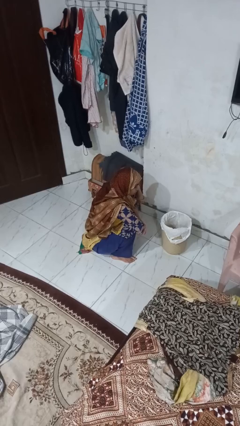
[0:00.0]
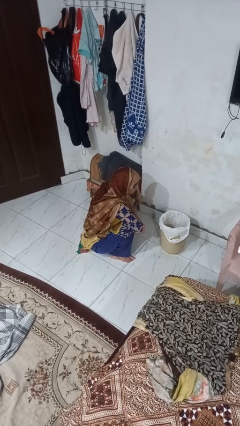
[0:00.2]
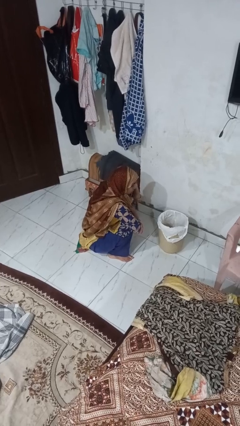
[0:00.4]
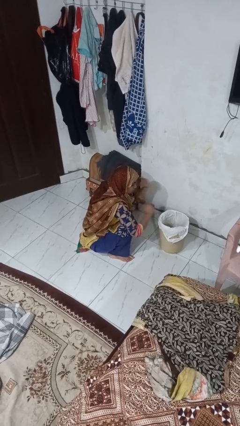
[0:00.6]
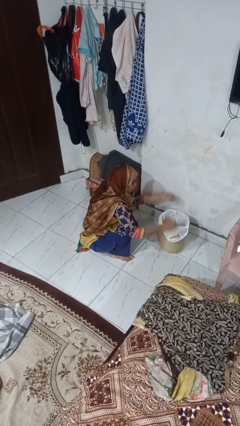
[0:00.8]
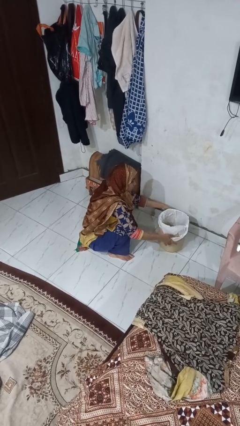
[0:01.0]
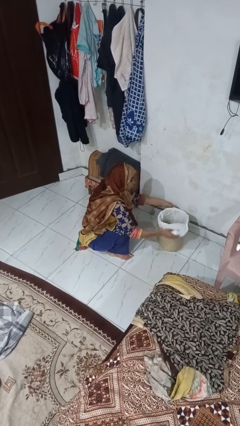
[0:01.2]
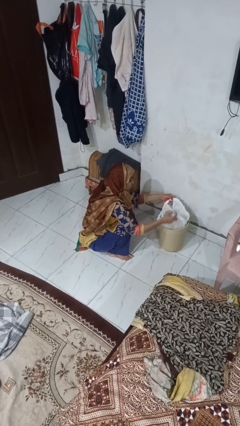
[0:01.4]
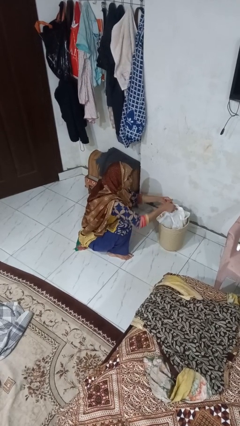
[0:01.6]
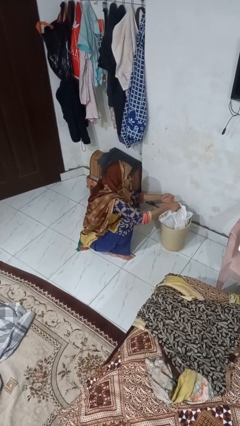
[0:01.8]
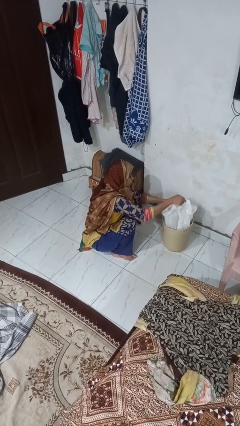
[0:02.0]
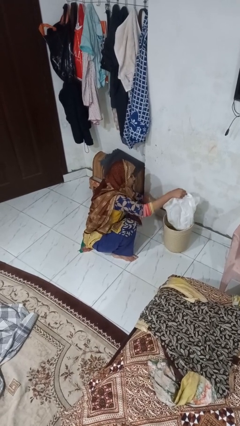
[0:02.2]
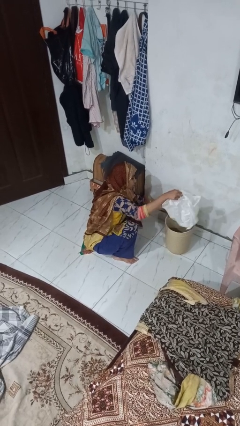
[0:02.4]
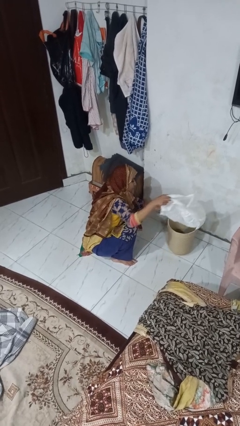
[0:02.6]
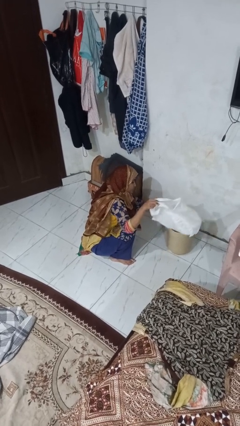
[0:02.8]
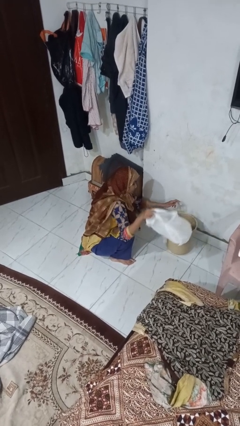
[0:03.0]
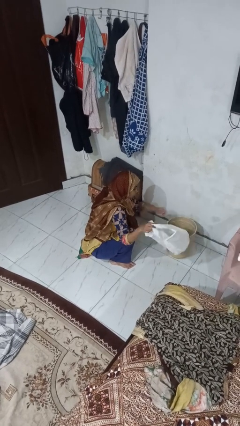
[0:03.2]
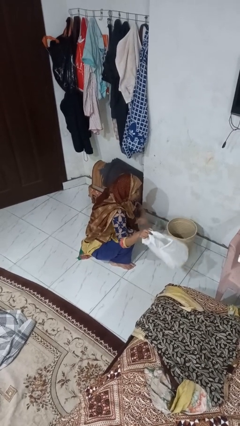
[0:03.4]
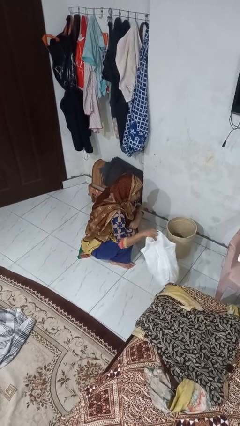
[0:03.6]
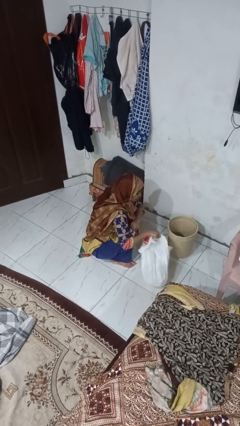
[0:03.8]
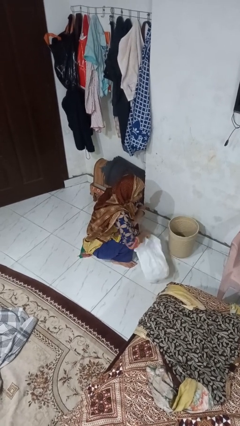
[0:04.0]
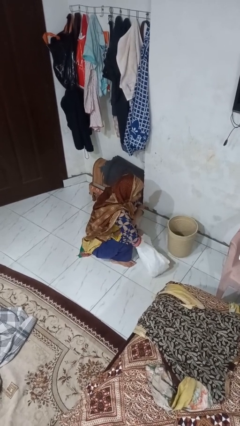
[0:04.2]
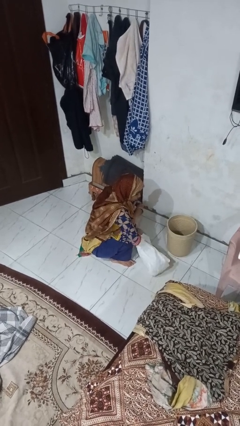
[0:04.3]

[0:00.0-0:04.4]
person removes trashbag from trashcan

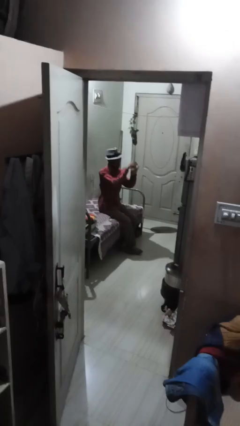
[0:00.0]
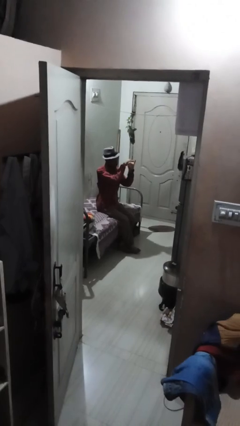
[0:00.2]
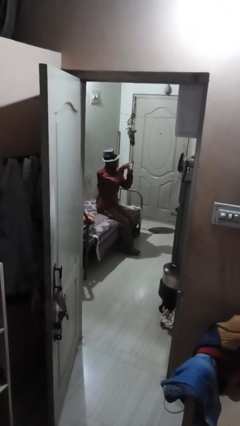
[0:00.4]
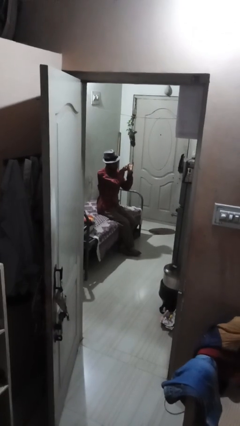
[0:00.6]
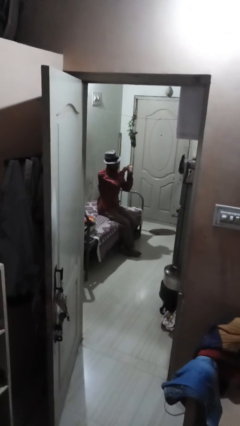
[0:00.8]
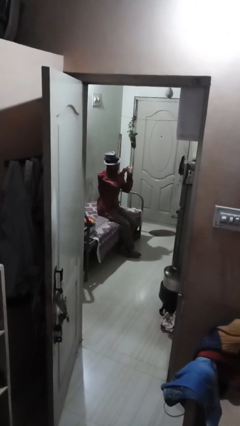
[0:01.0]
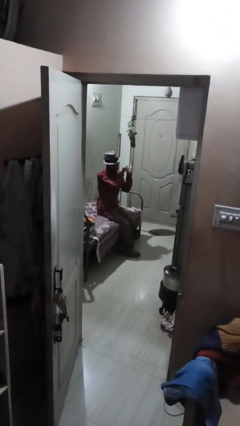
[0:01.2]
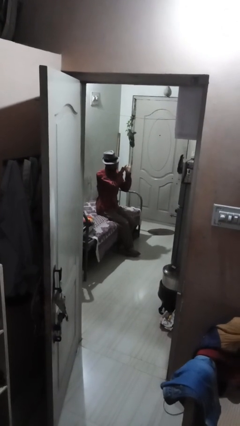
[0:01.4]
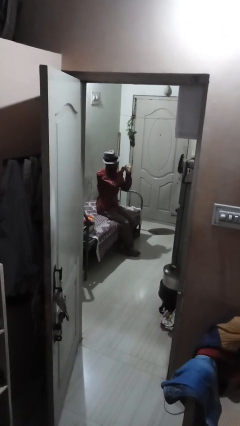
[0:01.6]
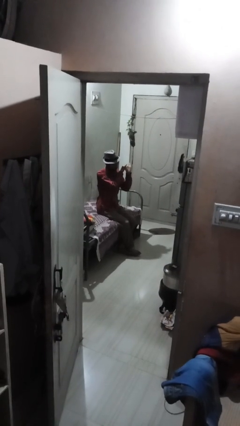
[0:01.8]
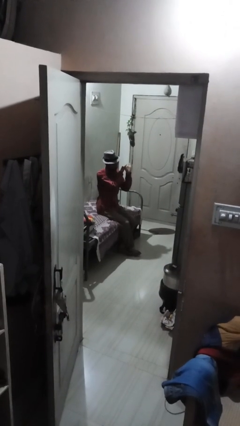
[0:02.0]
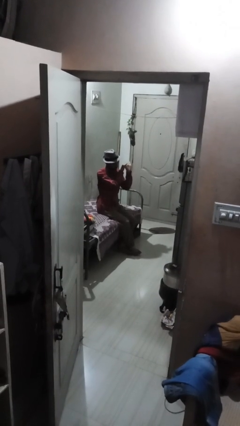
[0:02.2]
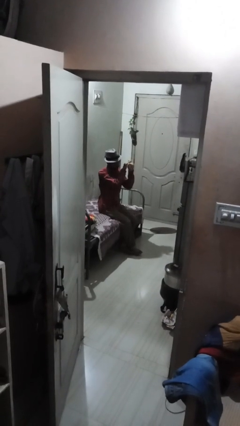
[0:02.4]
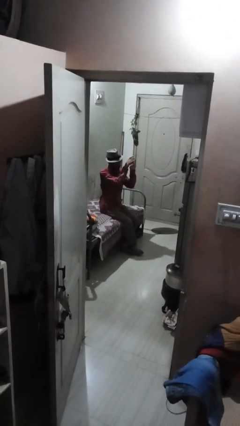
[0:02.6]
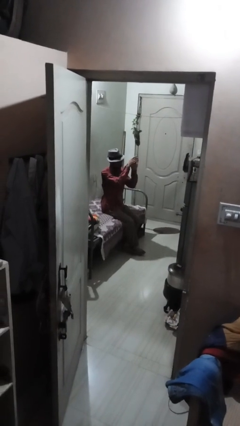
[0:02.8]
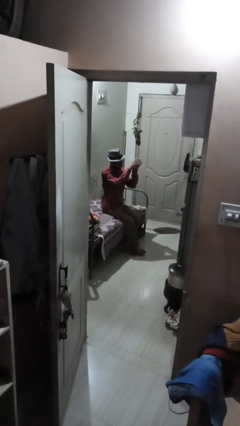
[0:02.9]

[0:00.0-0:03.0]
person cracks knuckles

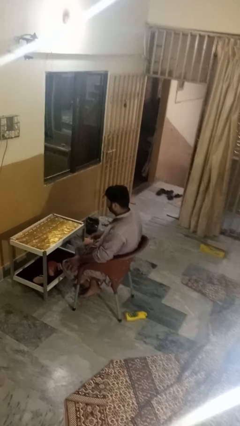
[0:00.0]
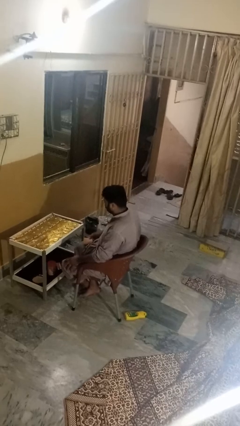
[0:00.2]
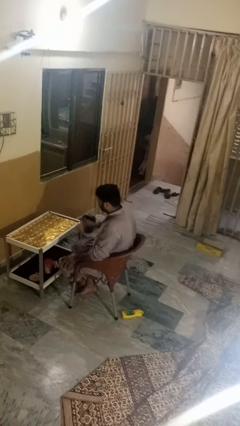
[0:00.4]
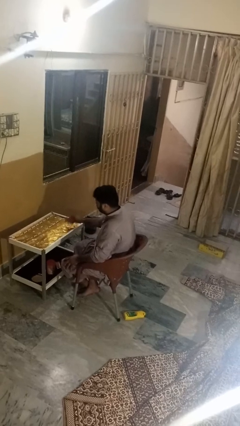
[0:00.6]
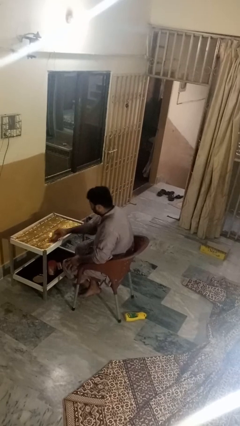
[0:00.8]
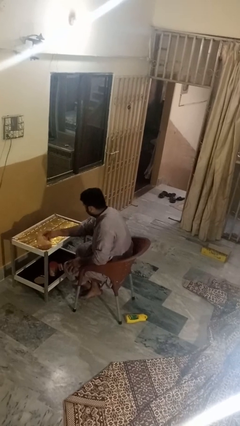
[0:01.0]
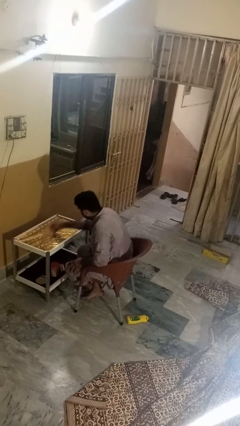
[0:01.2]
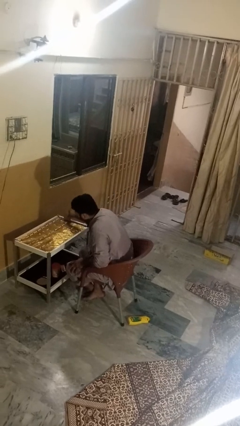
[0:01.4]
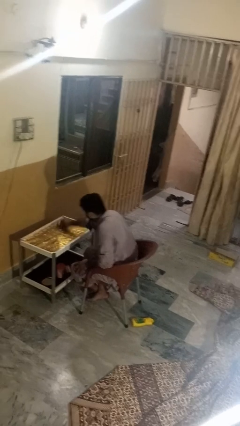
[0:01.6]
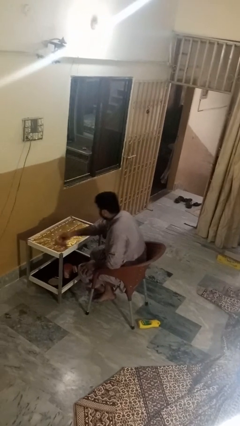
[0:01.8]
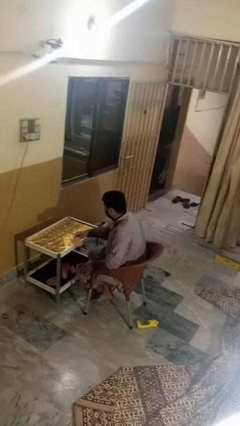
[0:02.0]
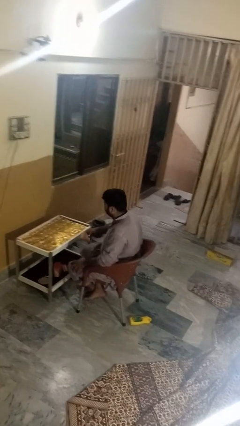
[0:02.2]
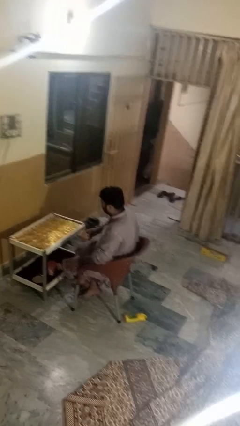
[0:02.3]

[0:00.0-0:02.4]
person cleans table with rag

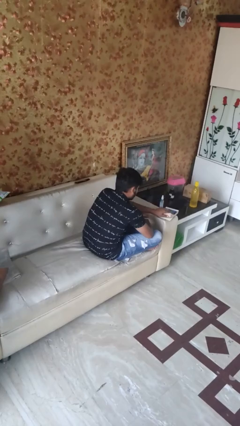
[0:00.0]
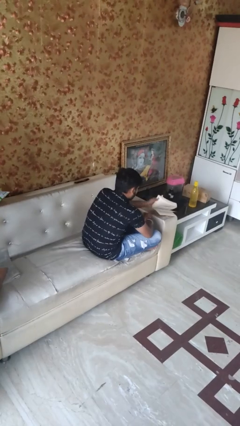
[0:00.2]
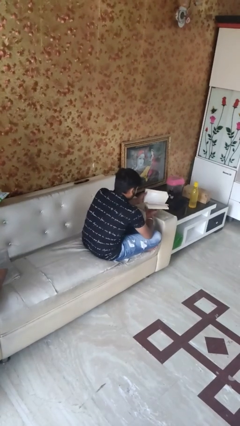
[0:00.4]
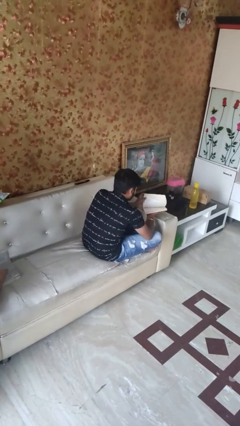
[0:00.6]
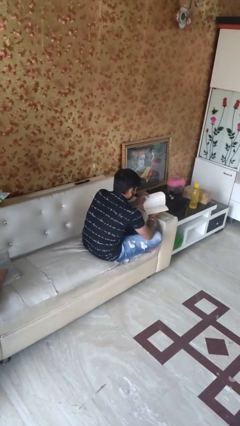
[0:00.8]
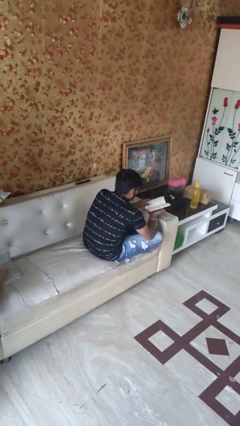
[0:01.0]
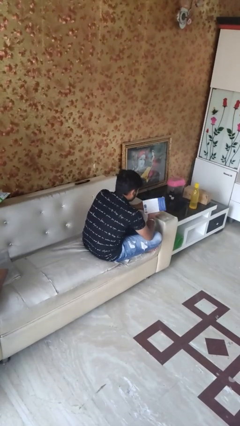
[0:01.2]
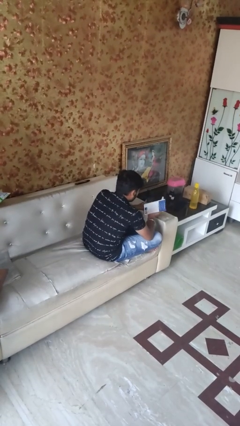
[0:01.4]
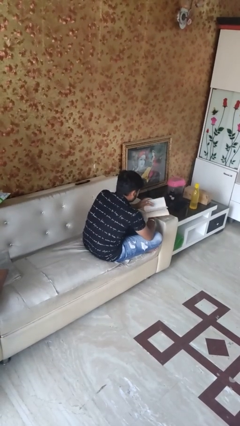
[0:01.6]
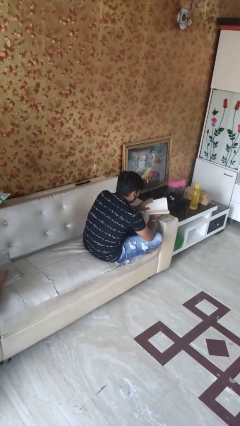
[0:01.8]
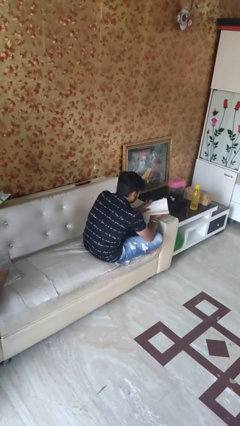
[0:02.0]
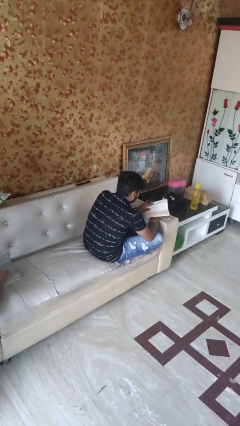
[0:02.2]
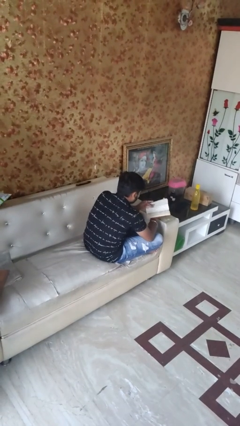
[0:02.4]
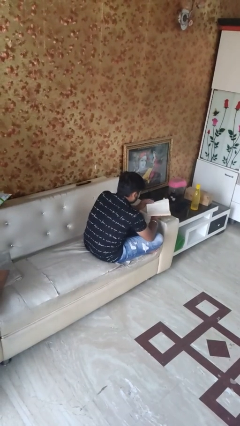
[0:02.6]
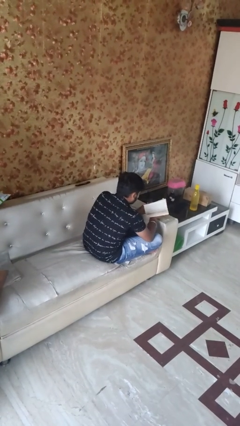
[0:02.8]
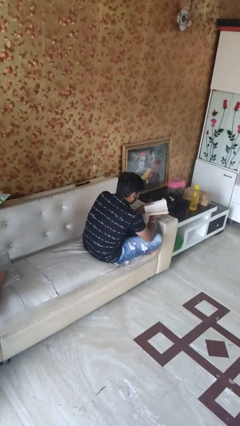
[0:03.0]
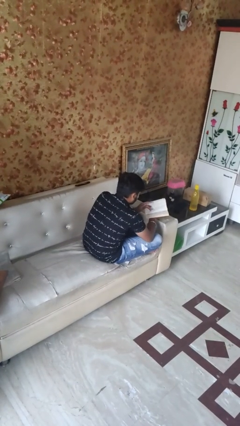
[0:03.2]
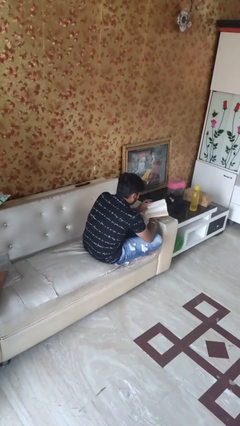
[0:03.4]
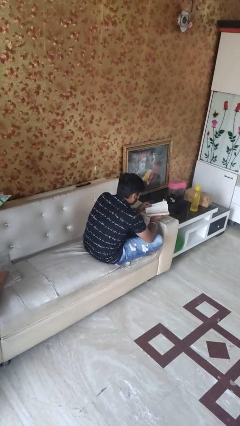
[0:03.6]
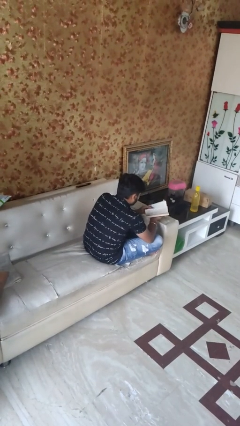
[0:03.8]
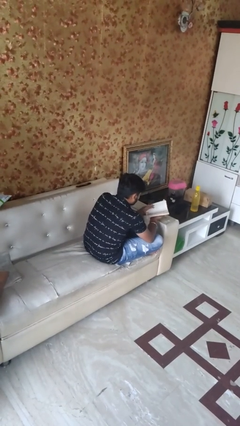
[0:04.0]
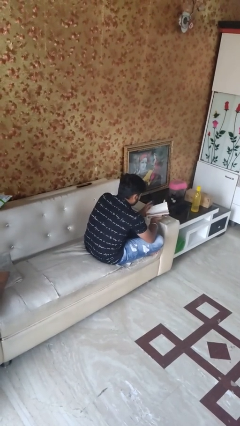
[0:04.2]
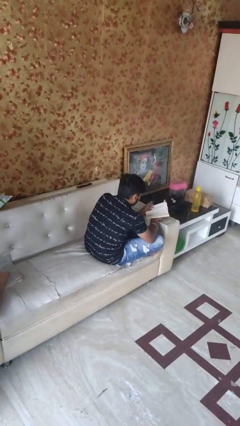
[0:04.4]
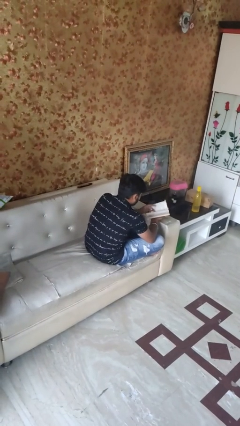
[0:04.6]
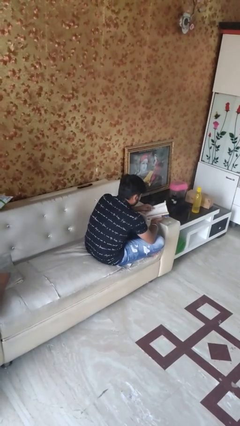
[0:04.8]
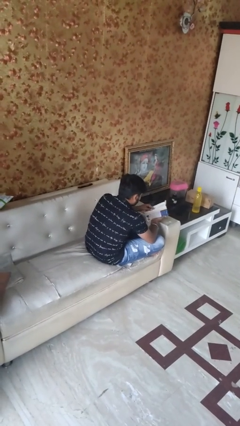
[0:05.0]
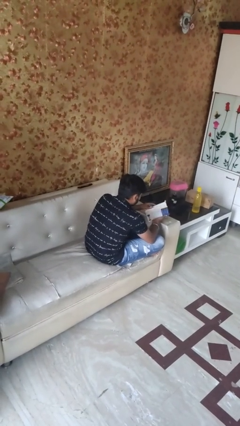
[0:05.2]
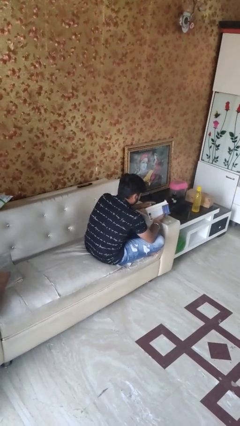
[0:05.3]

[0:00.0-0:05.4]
person reads book

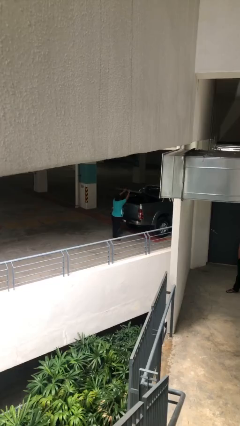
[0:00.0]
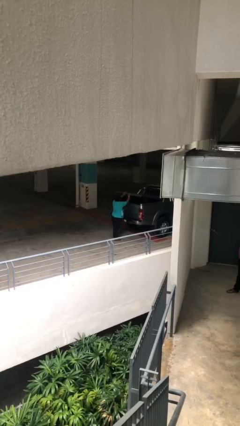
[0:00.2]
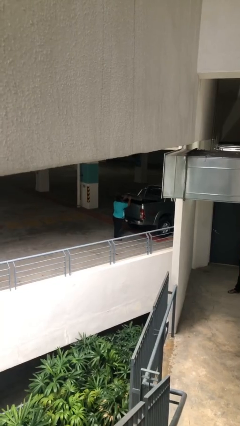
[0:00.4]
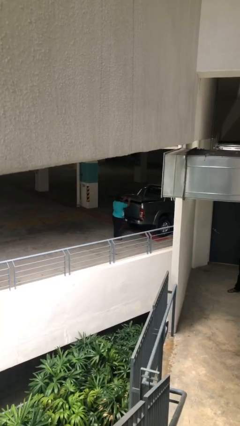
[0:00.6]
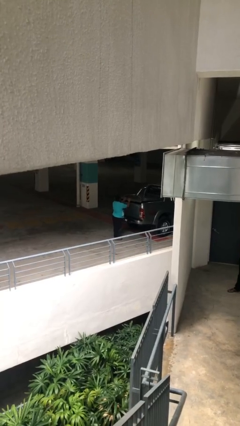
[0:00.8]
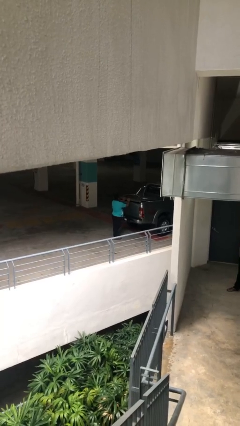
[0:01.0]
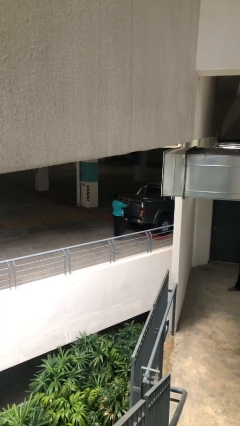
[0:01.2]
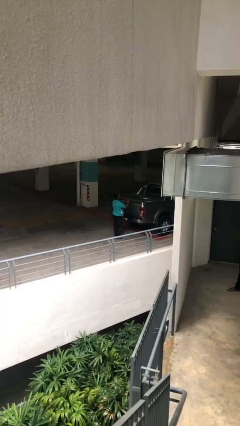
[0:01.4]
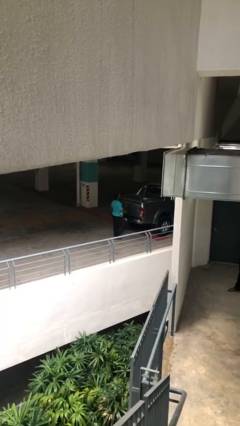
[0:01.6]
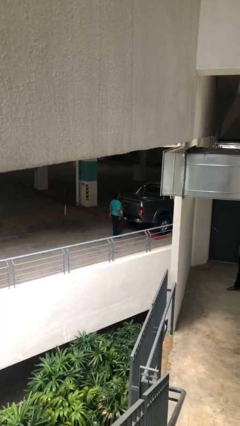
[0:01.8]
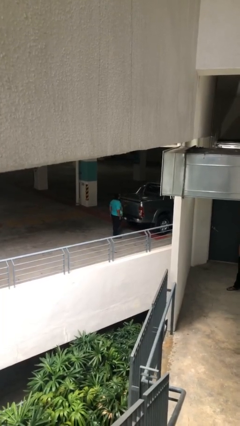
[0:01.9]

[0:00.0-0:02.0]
person closes car trunk

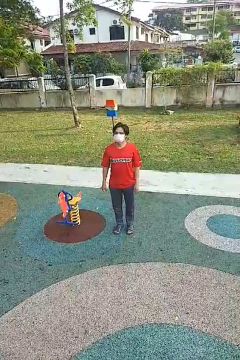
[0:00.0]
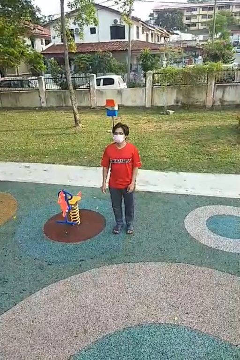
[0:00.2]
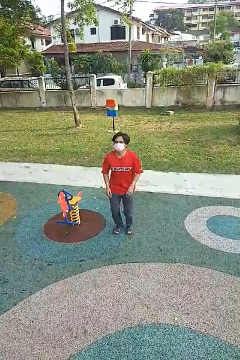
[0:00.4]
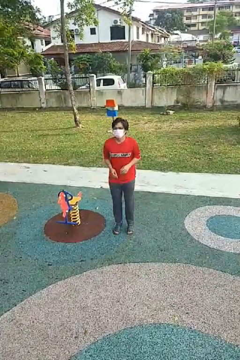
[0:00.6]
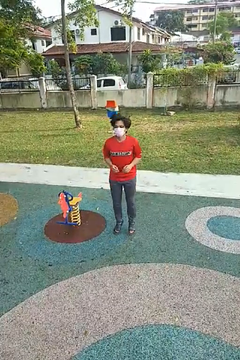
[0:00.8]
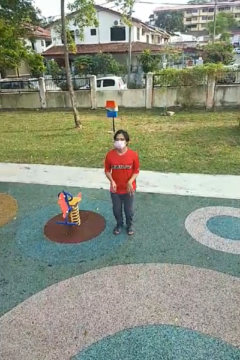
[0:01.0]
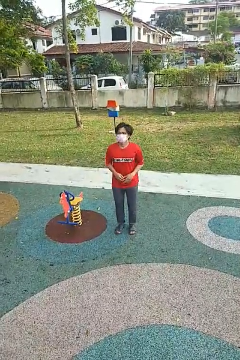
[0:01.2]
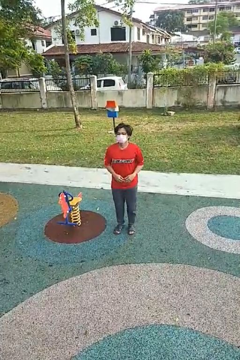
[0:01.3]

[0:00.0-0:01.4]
person jumps
